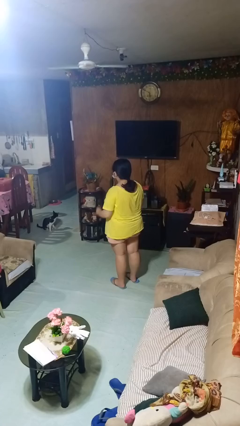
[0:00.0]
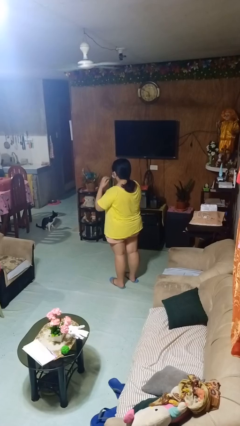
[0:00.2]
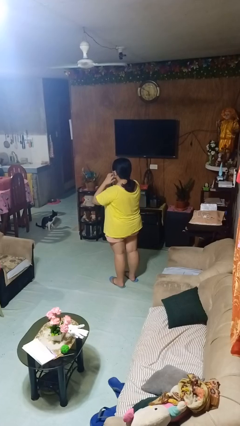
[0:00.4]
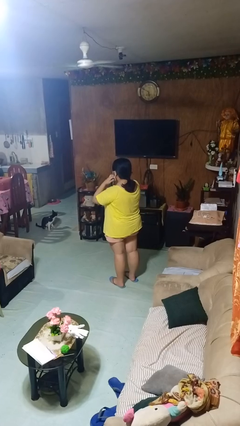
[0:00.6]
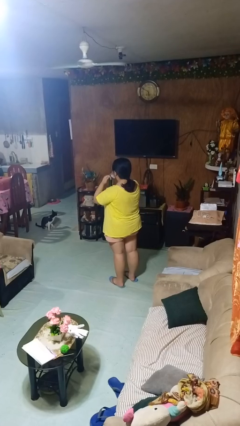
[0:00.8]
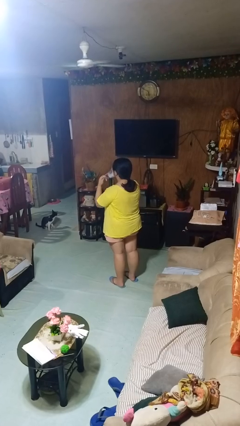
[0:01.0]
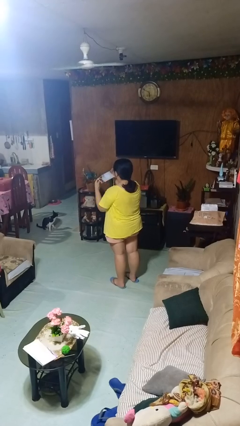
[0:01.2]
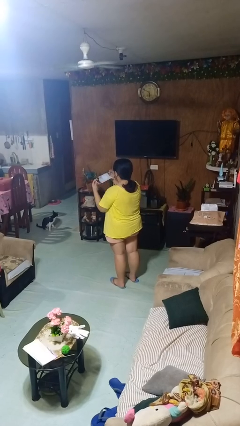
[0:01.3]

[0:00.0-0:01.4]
person takes off facemask

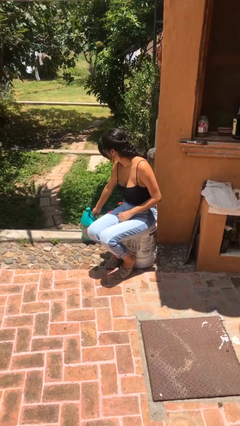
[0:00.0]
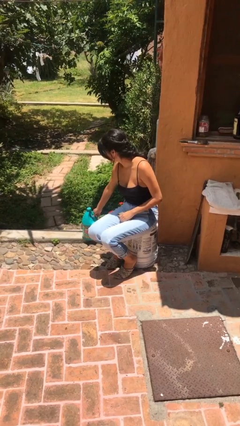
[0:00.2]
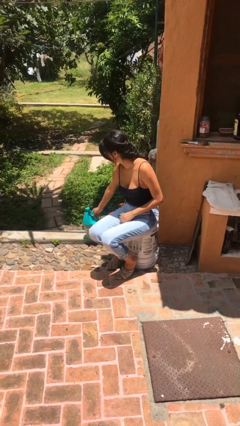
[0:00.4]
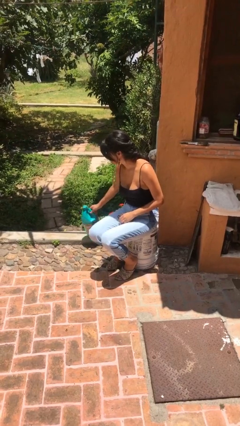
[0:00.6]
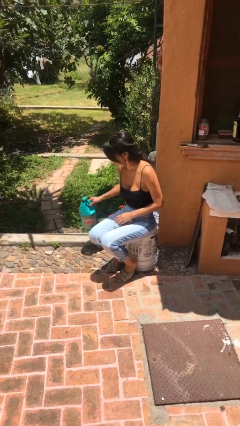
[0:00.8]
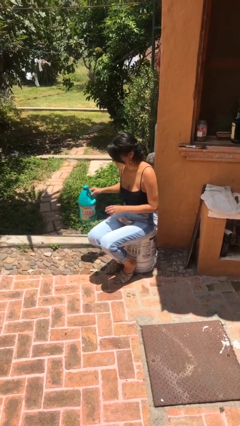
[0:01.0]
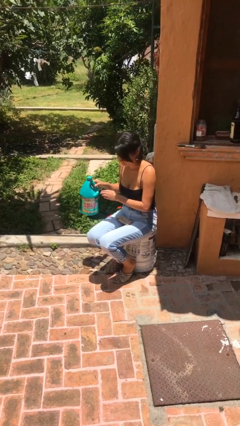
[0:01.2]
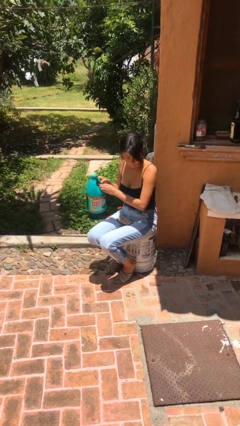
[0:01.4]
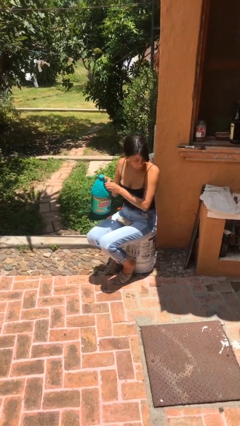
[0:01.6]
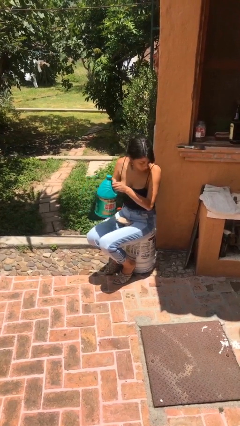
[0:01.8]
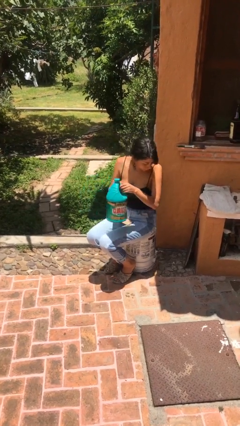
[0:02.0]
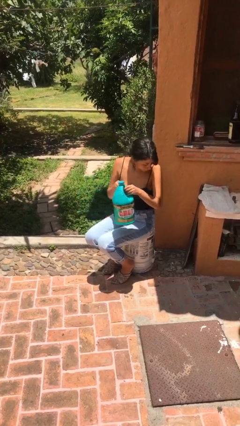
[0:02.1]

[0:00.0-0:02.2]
person picks up object from floor

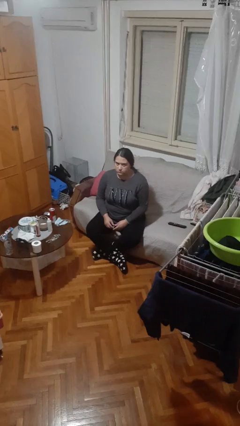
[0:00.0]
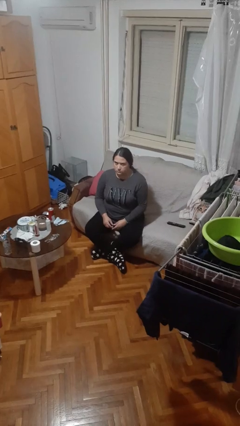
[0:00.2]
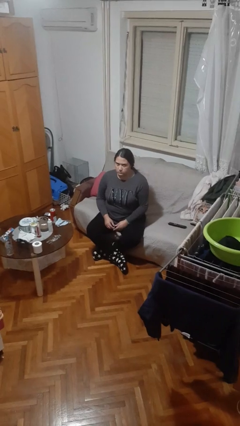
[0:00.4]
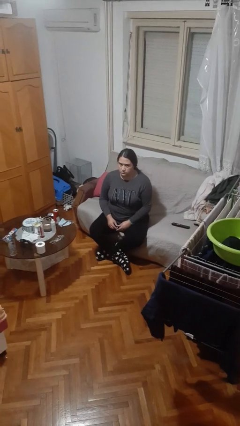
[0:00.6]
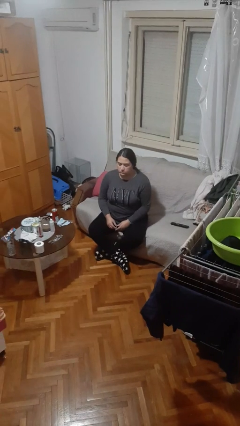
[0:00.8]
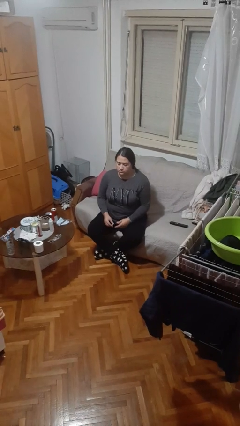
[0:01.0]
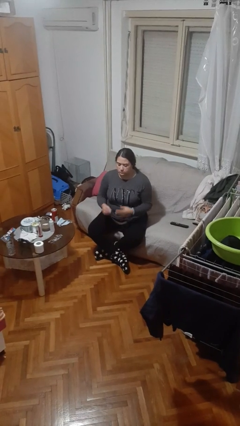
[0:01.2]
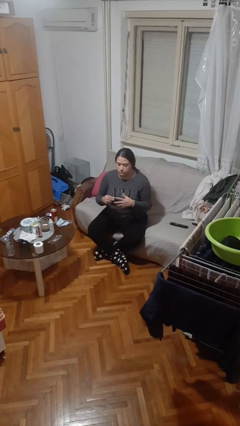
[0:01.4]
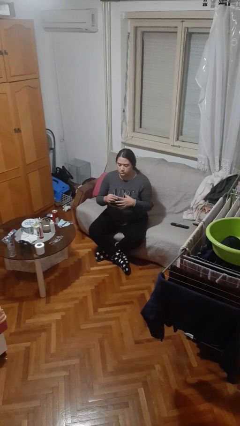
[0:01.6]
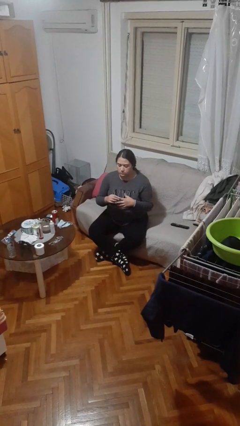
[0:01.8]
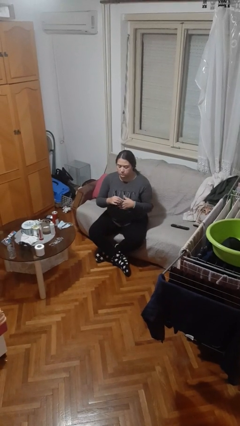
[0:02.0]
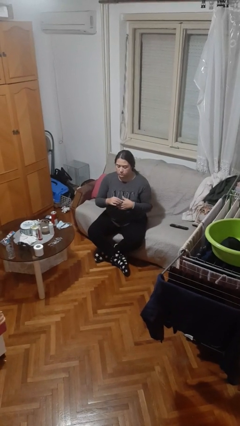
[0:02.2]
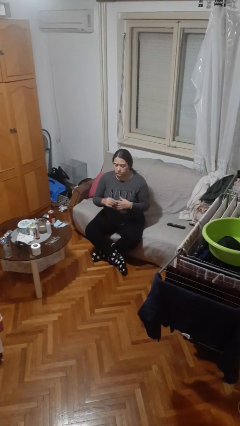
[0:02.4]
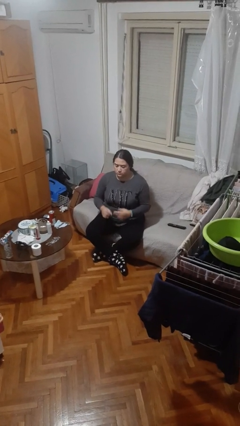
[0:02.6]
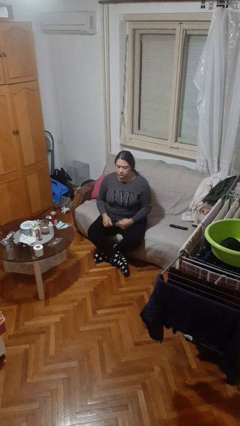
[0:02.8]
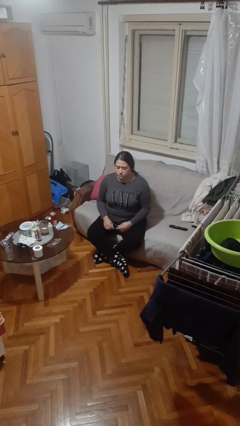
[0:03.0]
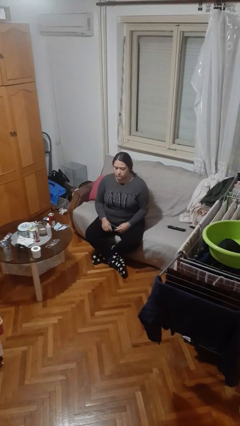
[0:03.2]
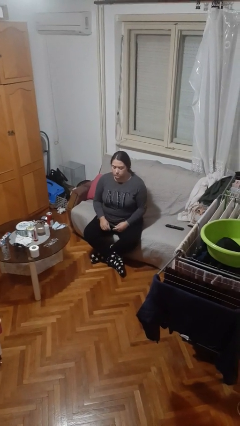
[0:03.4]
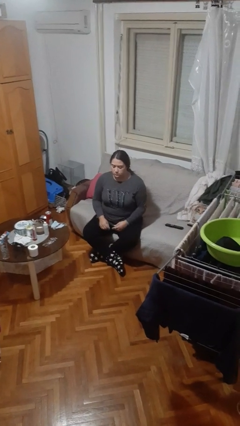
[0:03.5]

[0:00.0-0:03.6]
person puts on ring

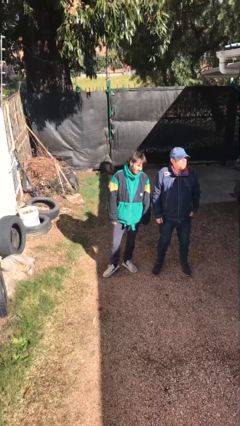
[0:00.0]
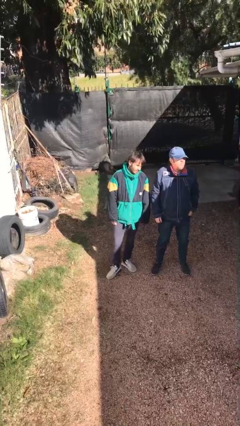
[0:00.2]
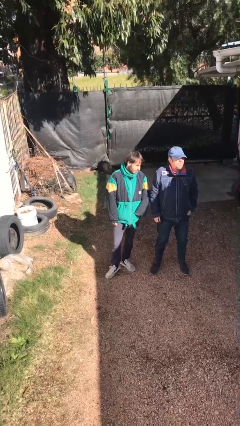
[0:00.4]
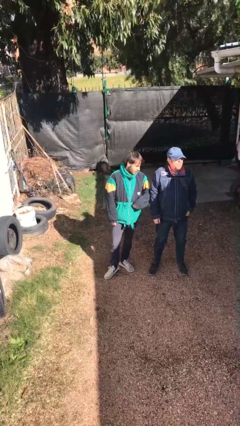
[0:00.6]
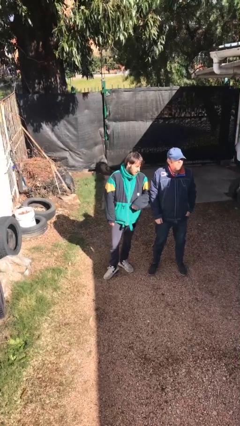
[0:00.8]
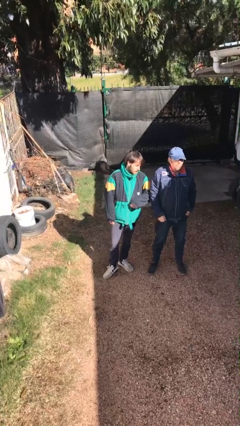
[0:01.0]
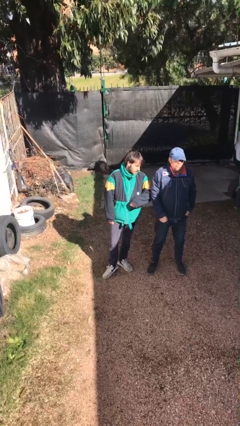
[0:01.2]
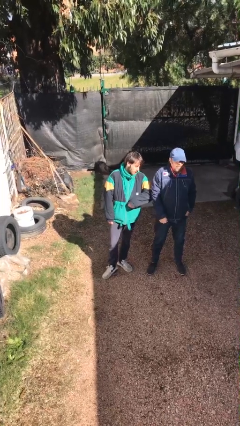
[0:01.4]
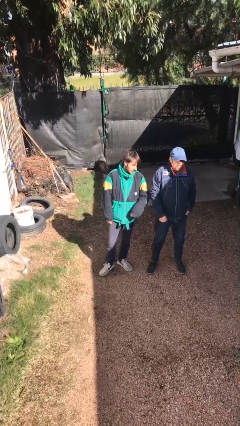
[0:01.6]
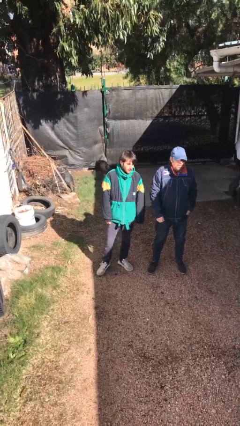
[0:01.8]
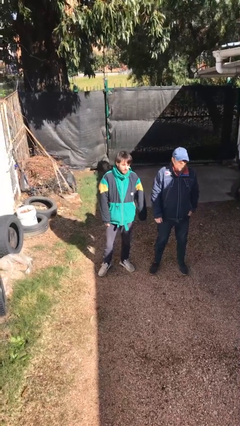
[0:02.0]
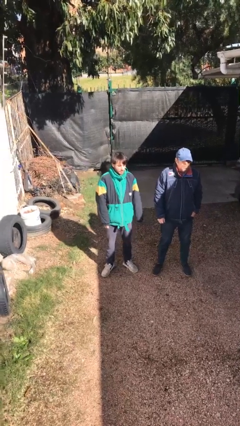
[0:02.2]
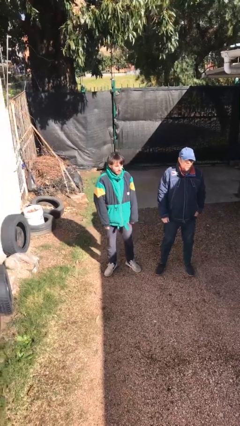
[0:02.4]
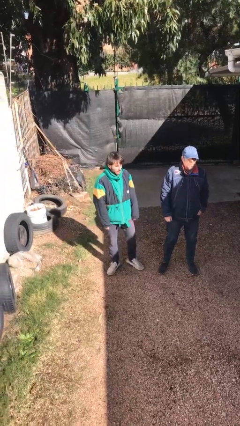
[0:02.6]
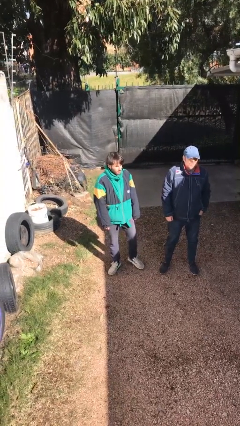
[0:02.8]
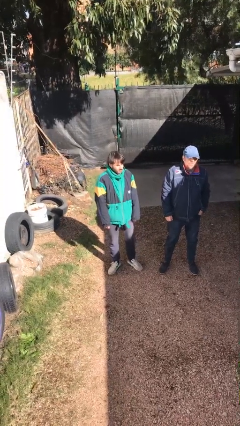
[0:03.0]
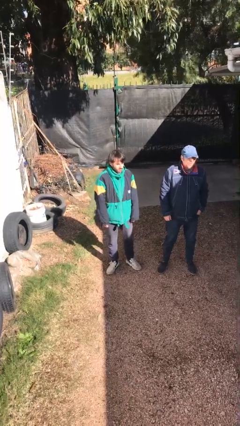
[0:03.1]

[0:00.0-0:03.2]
person nudges person with elbow

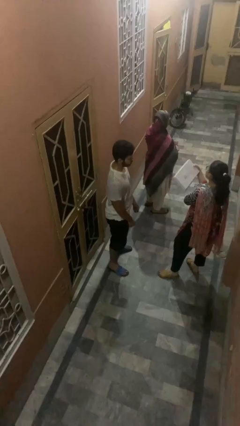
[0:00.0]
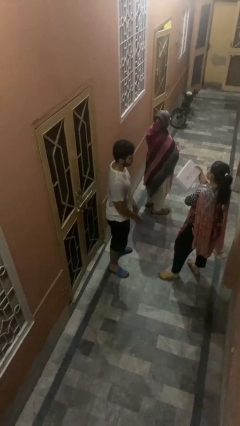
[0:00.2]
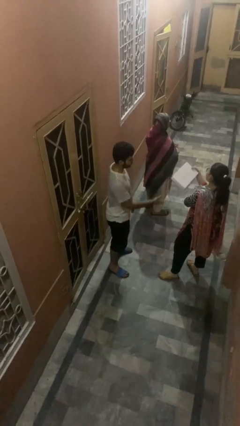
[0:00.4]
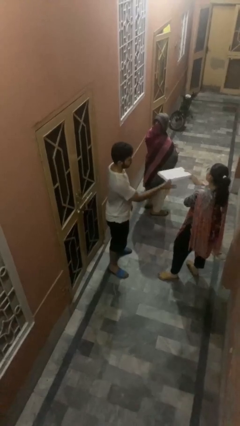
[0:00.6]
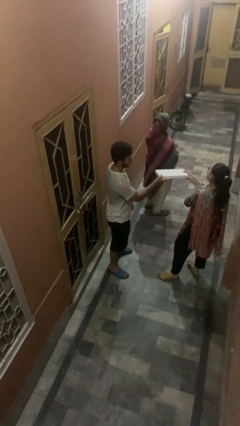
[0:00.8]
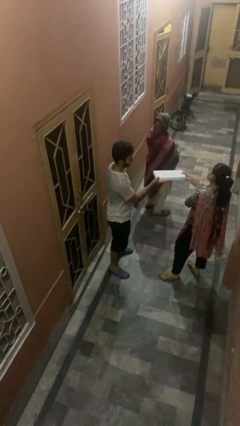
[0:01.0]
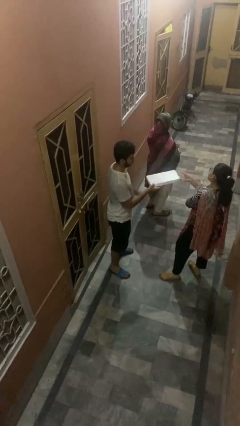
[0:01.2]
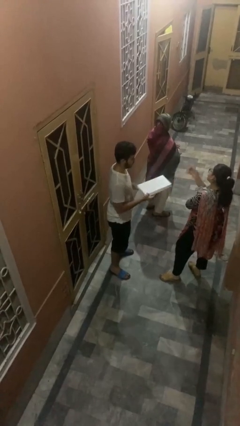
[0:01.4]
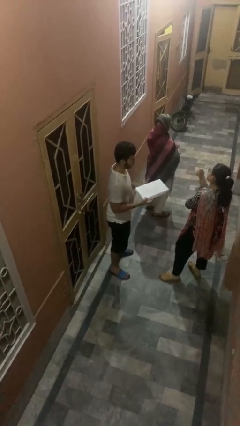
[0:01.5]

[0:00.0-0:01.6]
person transfers object to person

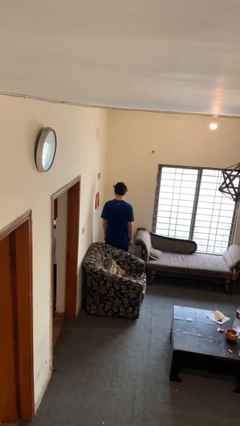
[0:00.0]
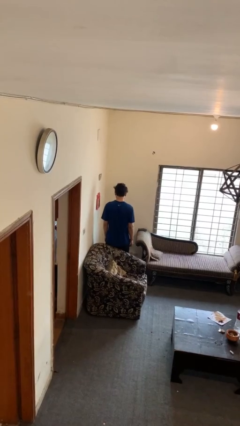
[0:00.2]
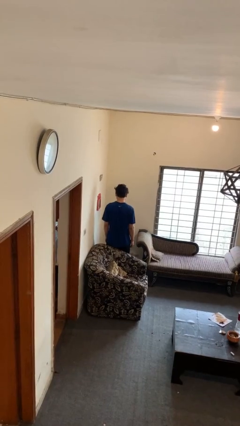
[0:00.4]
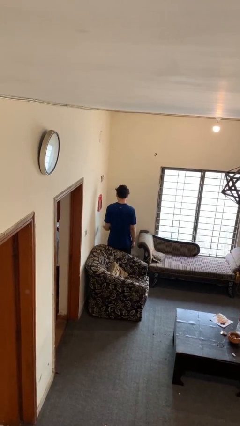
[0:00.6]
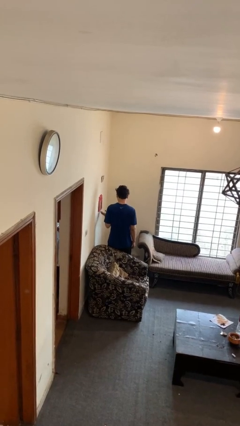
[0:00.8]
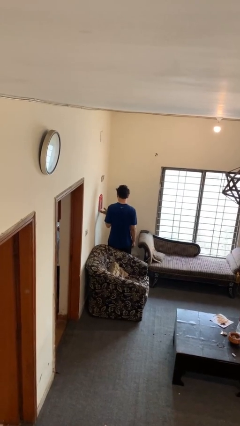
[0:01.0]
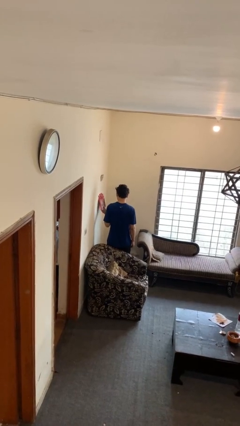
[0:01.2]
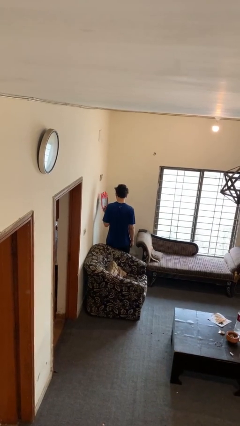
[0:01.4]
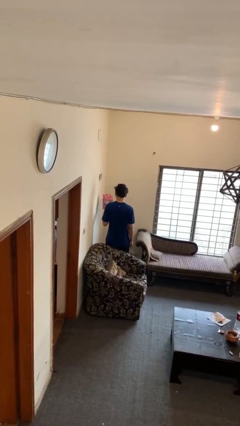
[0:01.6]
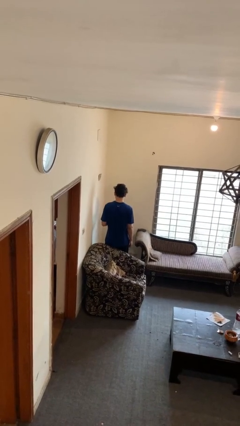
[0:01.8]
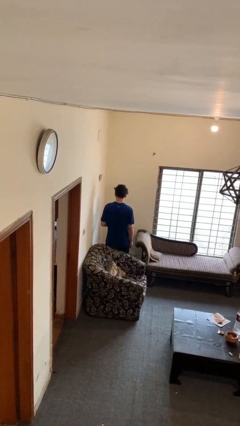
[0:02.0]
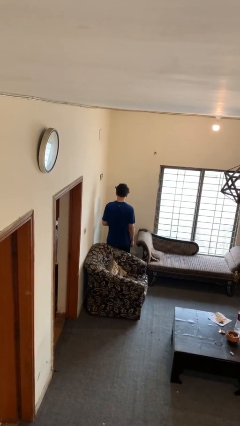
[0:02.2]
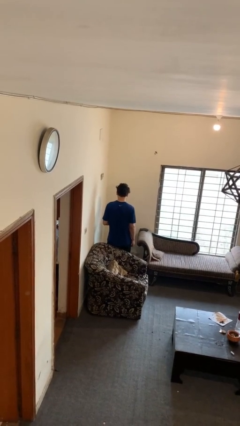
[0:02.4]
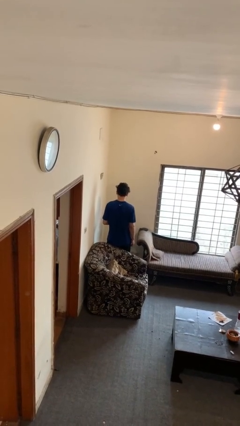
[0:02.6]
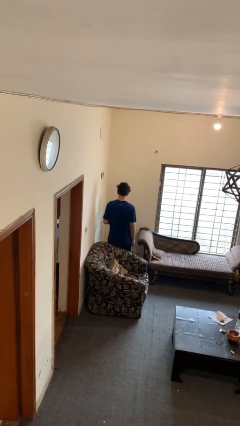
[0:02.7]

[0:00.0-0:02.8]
person takes down picture frame

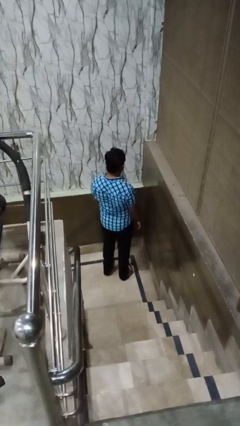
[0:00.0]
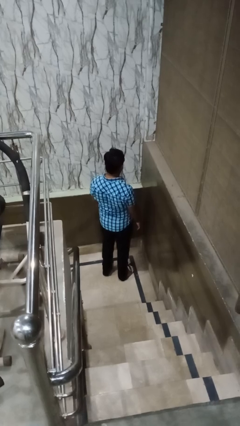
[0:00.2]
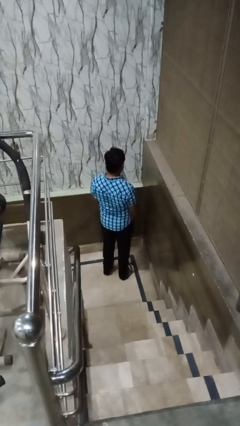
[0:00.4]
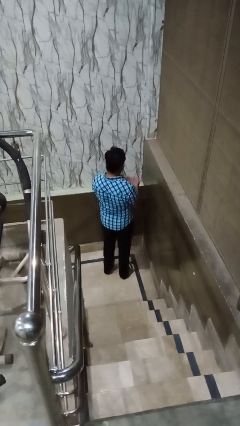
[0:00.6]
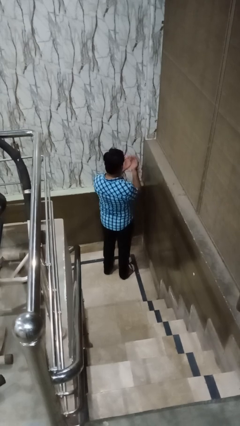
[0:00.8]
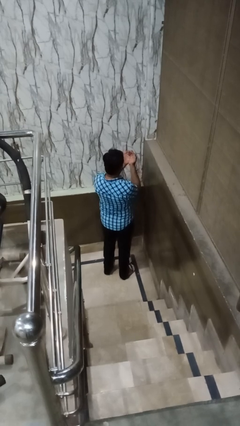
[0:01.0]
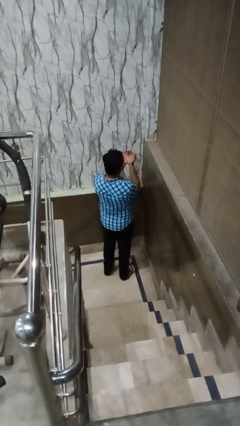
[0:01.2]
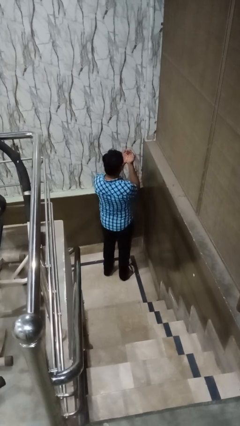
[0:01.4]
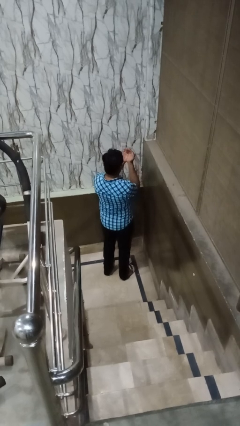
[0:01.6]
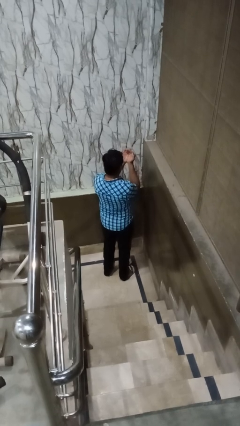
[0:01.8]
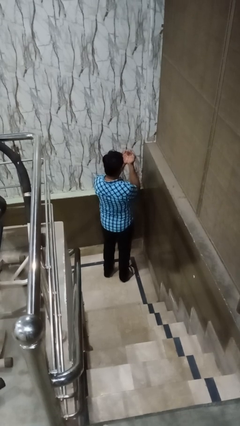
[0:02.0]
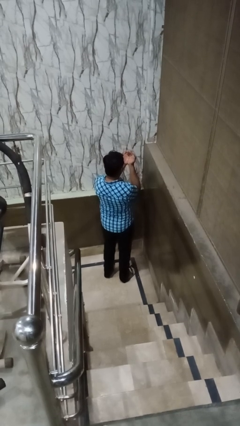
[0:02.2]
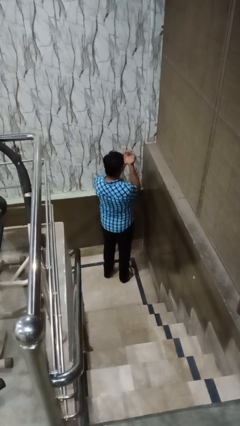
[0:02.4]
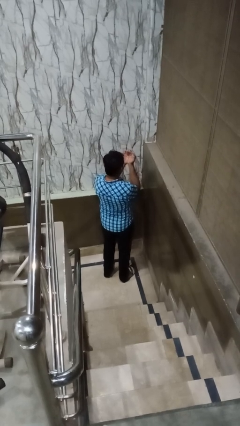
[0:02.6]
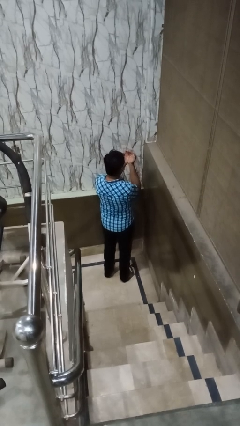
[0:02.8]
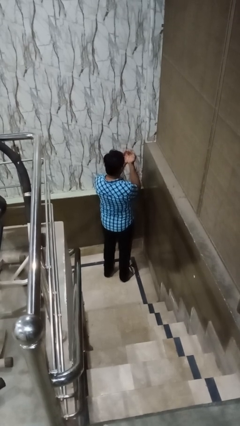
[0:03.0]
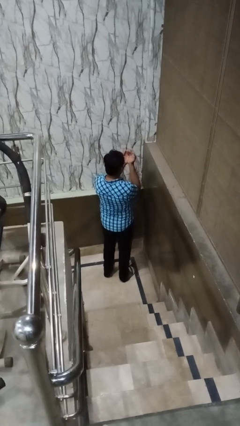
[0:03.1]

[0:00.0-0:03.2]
person prays
